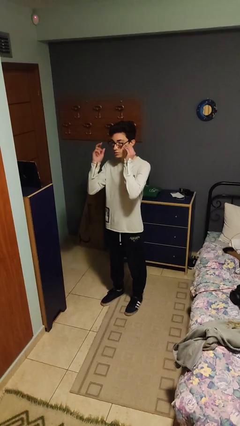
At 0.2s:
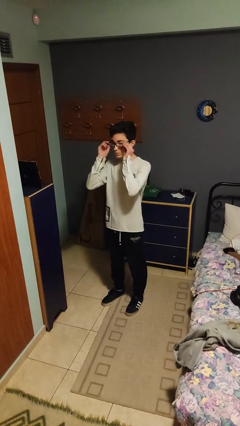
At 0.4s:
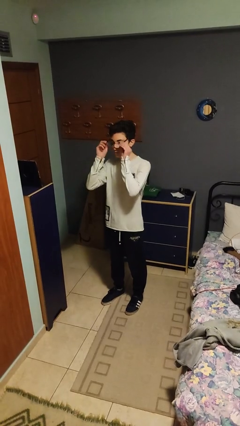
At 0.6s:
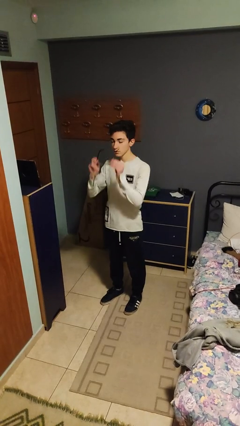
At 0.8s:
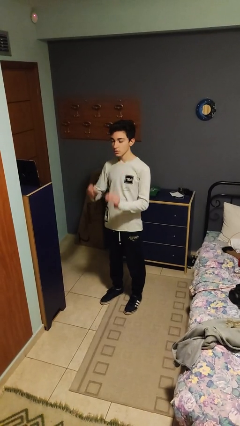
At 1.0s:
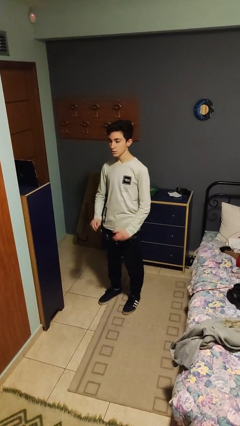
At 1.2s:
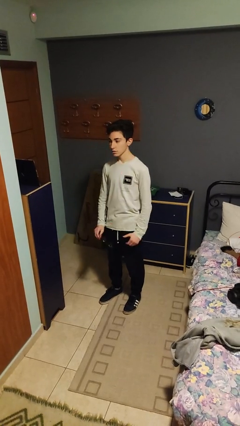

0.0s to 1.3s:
person takes off glasses

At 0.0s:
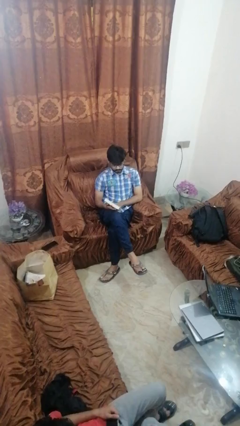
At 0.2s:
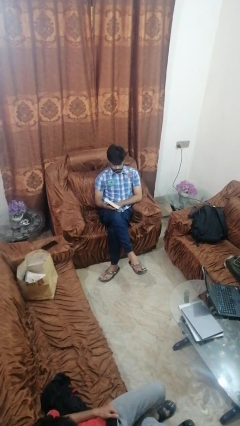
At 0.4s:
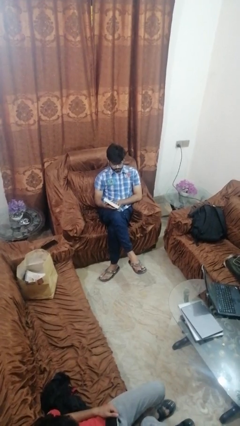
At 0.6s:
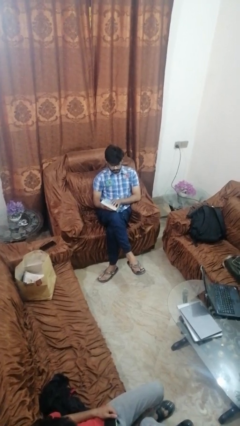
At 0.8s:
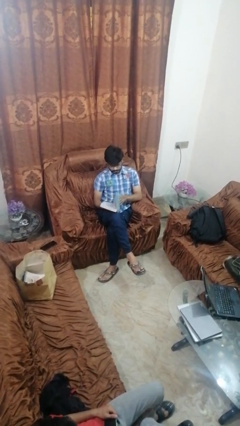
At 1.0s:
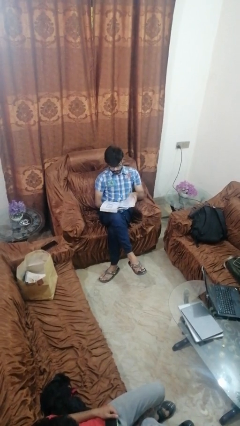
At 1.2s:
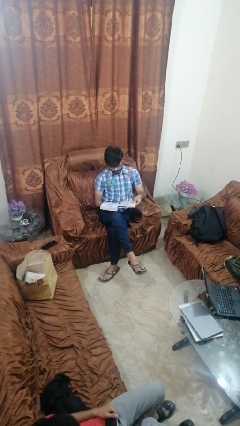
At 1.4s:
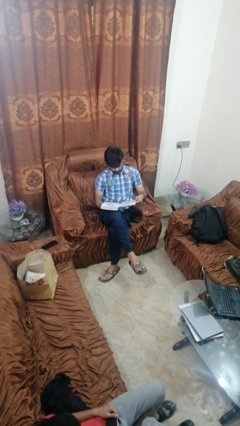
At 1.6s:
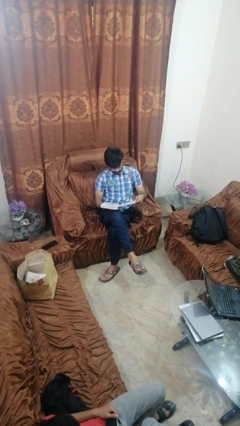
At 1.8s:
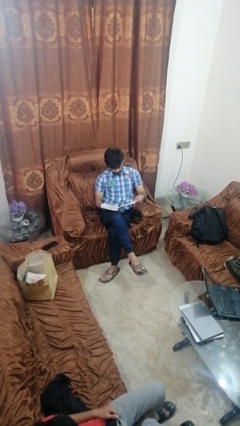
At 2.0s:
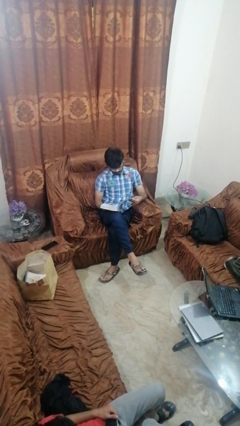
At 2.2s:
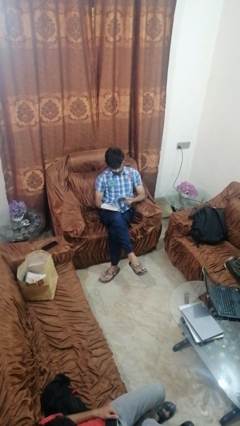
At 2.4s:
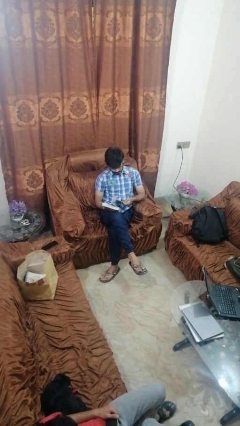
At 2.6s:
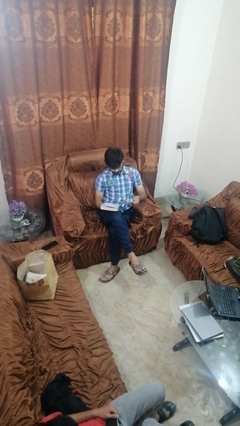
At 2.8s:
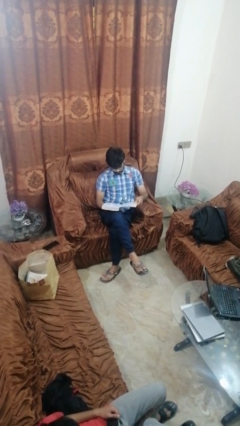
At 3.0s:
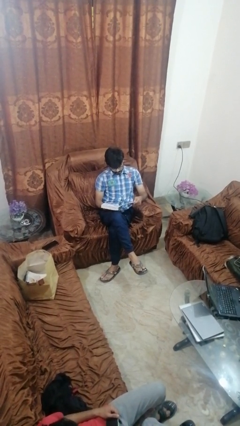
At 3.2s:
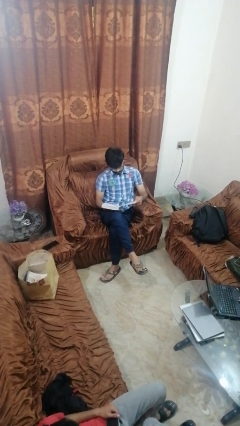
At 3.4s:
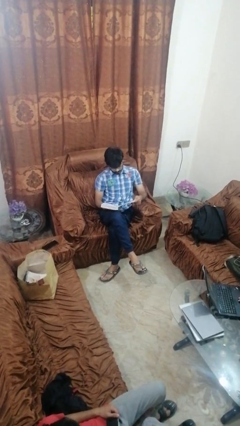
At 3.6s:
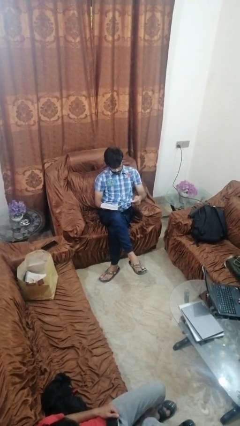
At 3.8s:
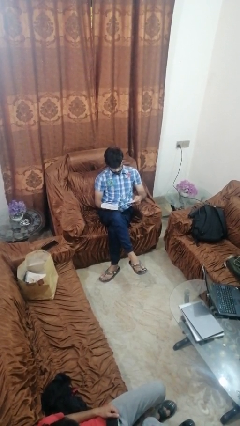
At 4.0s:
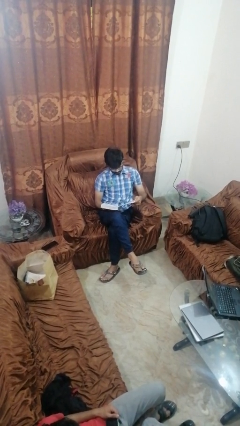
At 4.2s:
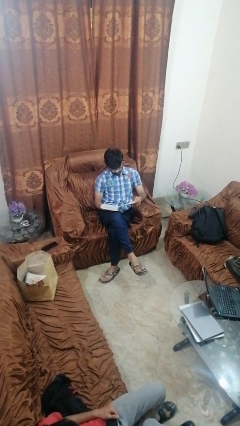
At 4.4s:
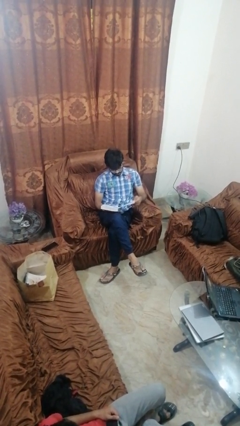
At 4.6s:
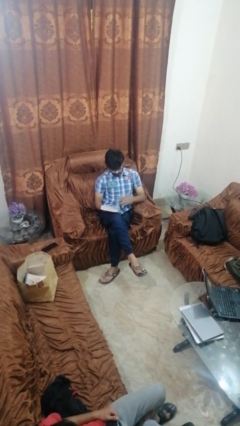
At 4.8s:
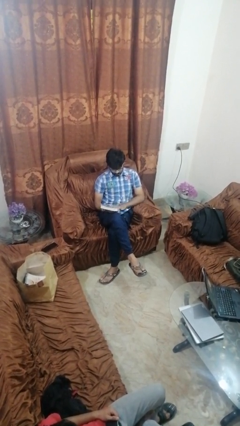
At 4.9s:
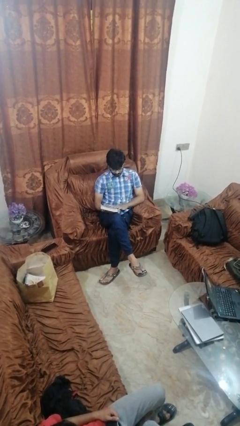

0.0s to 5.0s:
person reads book

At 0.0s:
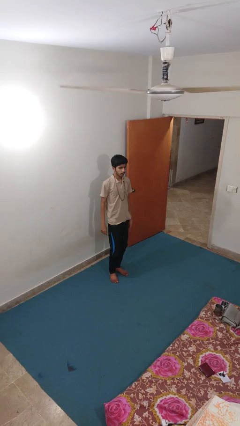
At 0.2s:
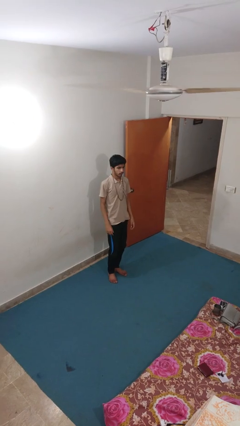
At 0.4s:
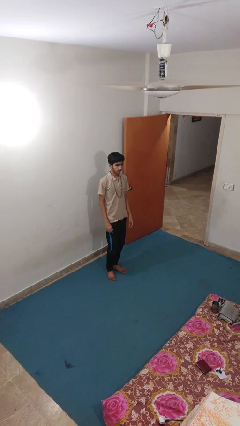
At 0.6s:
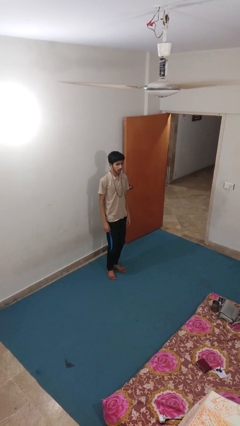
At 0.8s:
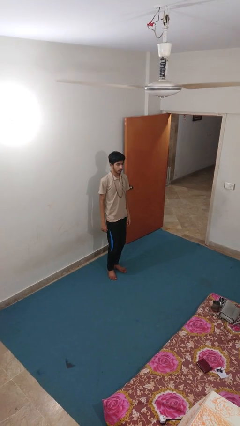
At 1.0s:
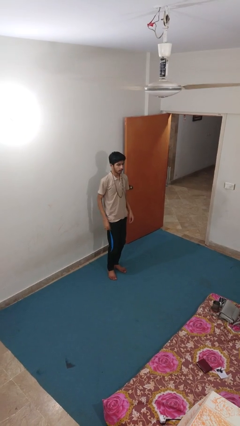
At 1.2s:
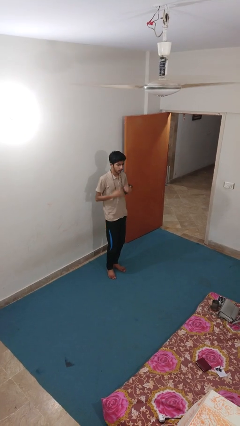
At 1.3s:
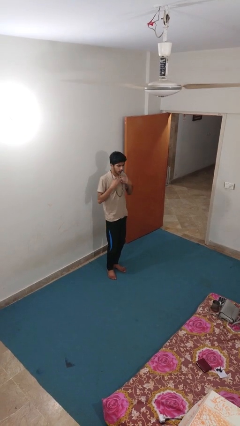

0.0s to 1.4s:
person puts on necklace

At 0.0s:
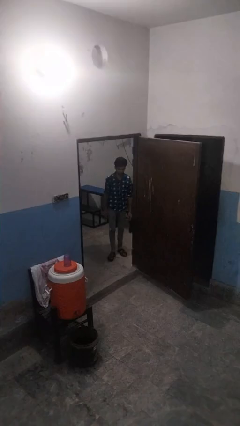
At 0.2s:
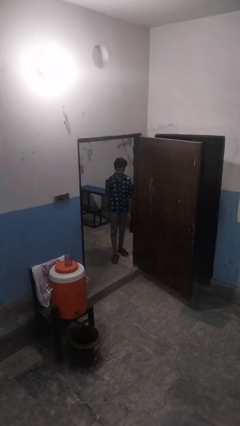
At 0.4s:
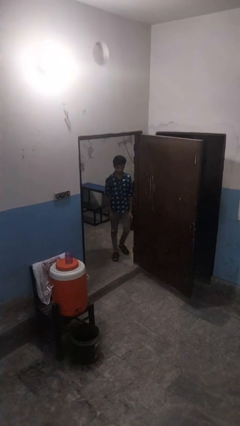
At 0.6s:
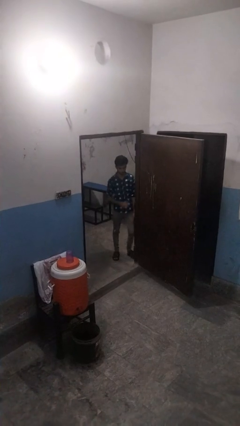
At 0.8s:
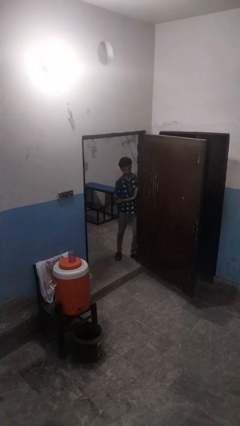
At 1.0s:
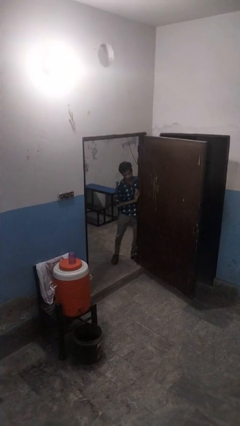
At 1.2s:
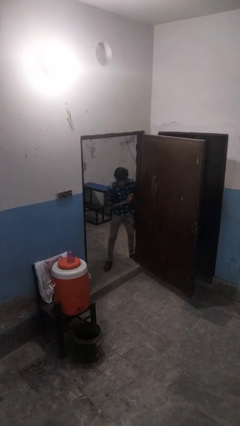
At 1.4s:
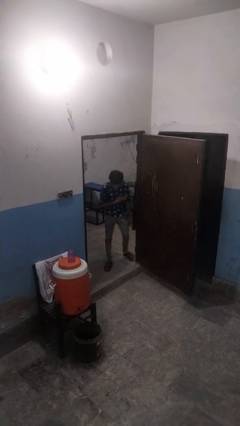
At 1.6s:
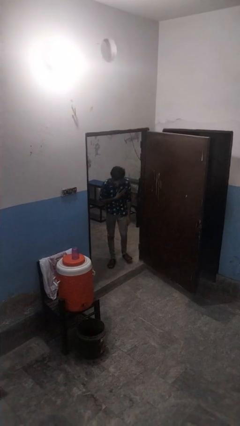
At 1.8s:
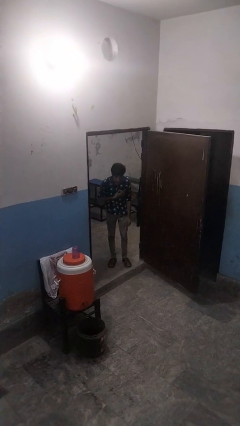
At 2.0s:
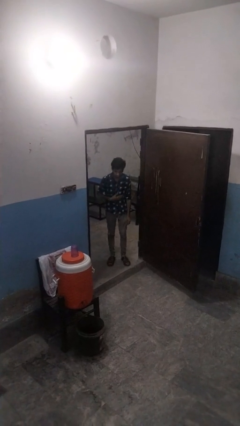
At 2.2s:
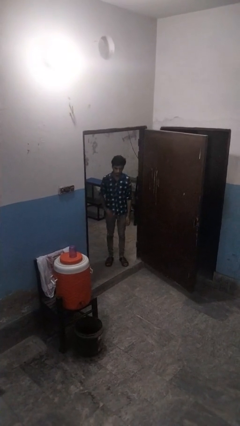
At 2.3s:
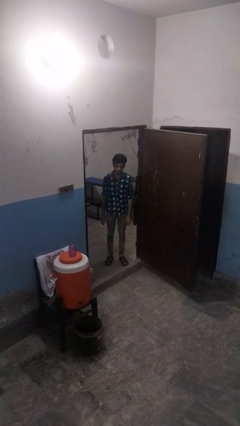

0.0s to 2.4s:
person bumps into wall

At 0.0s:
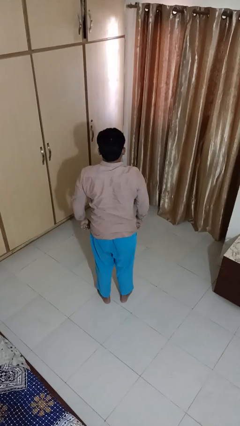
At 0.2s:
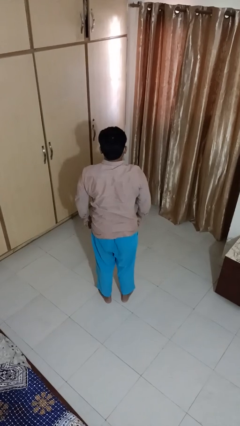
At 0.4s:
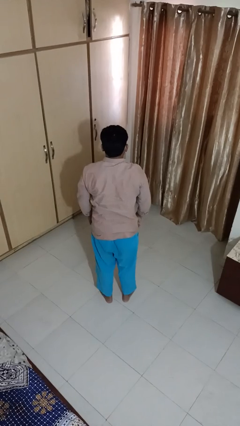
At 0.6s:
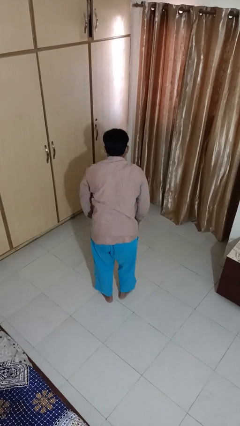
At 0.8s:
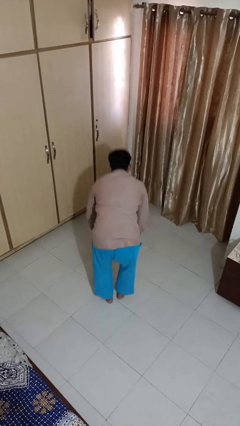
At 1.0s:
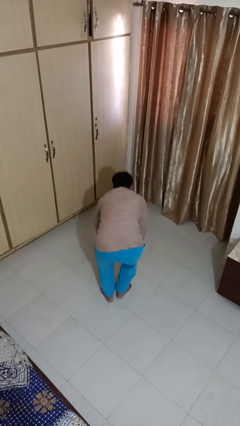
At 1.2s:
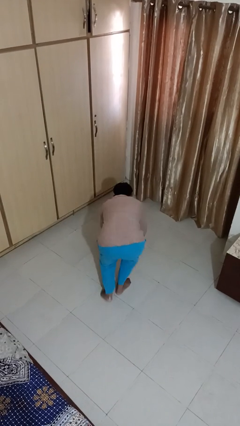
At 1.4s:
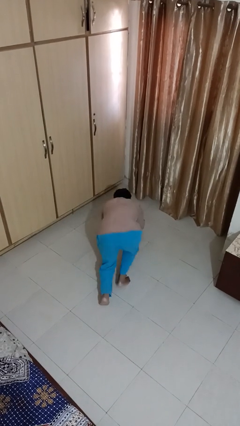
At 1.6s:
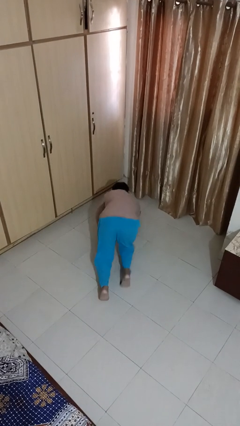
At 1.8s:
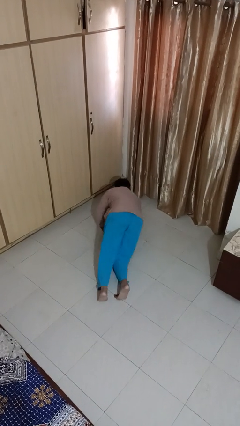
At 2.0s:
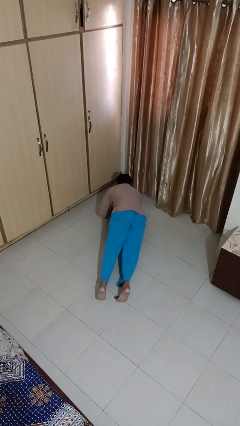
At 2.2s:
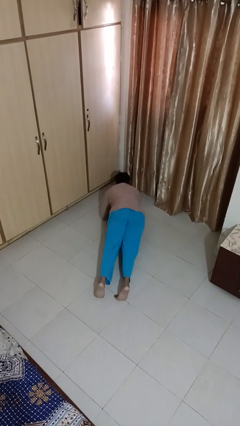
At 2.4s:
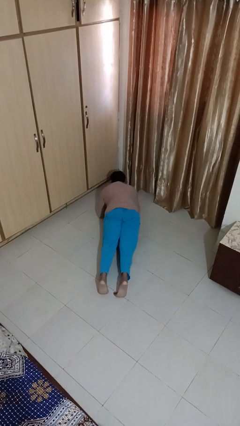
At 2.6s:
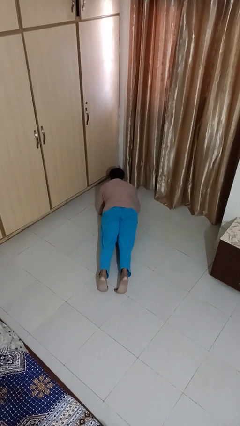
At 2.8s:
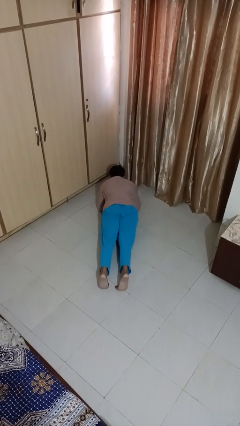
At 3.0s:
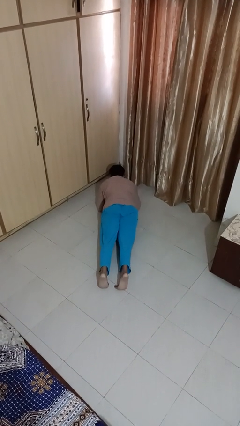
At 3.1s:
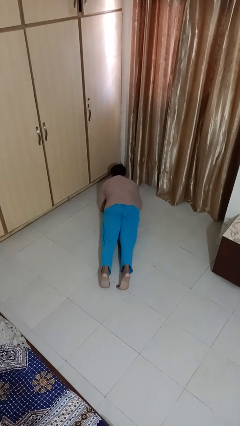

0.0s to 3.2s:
person exercises with plank

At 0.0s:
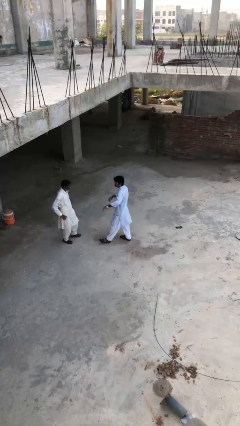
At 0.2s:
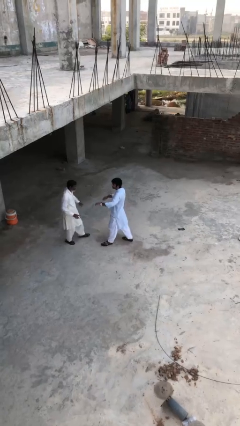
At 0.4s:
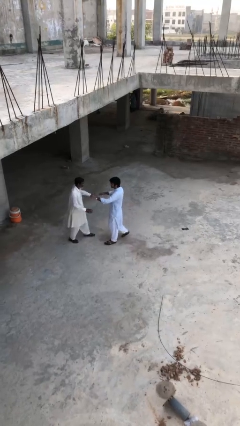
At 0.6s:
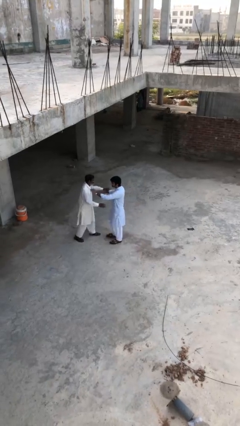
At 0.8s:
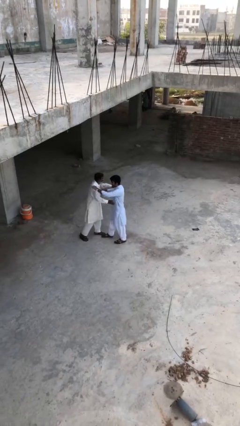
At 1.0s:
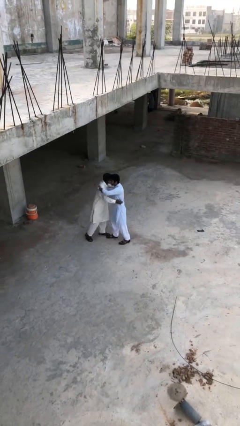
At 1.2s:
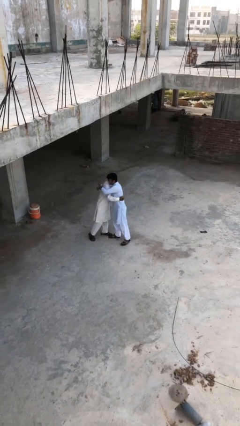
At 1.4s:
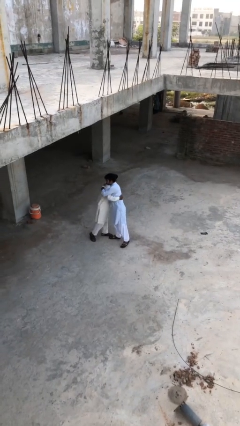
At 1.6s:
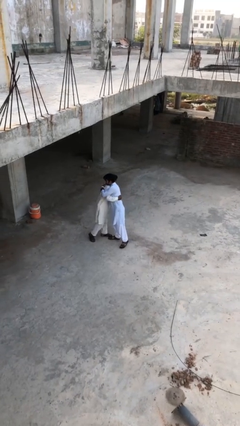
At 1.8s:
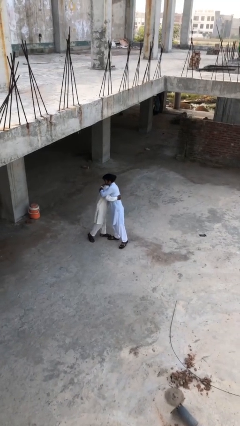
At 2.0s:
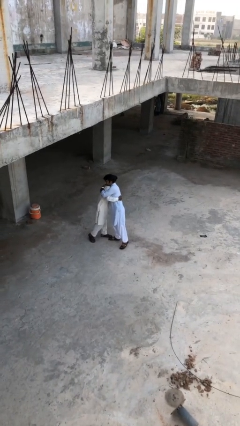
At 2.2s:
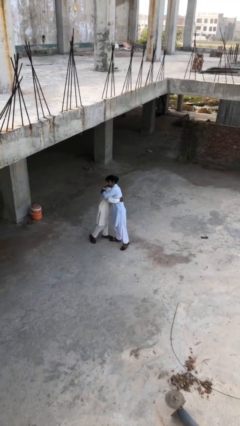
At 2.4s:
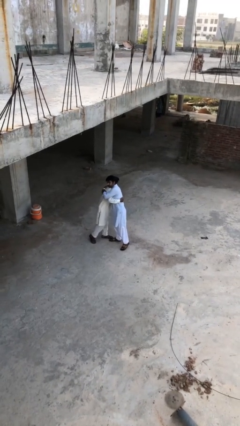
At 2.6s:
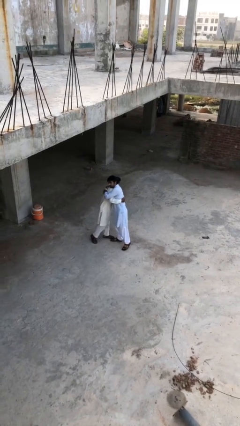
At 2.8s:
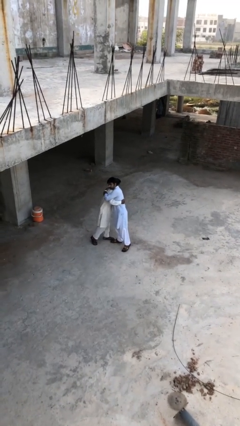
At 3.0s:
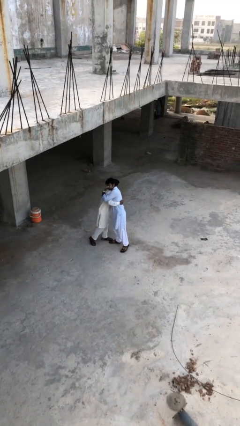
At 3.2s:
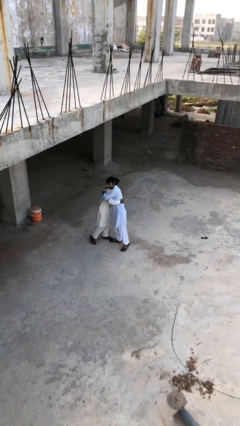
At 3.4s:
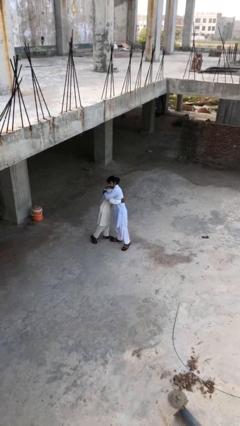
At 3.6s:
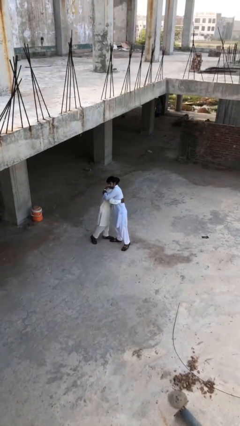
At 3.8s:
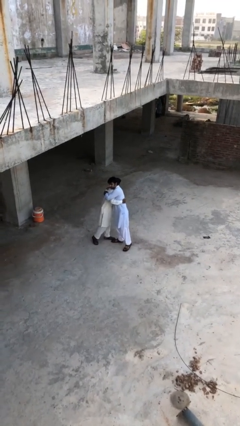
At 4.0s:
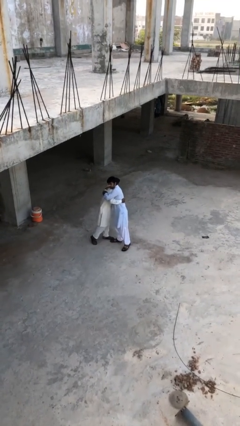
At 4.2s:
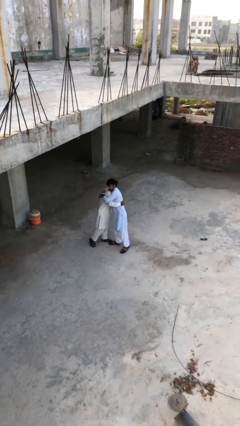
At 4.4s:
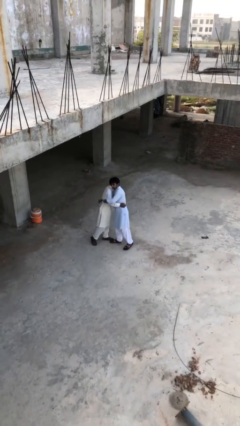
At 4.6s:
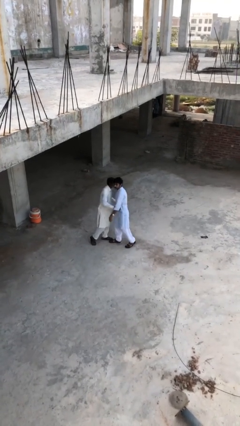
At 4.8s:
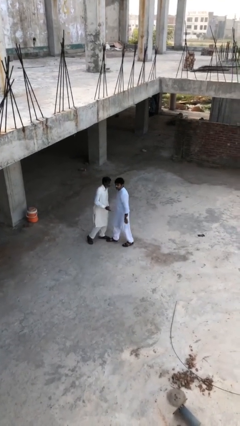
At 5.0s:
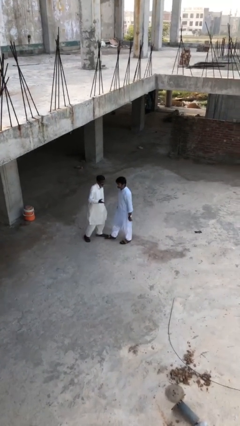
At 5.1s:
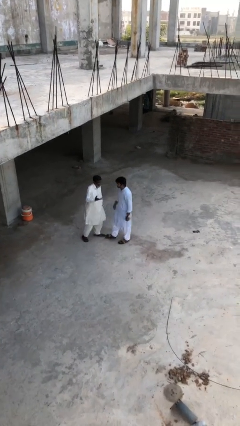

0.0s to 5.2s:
person embraces person
